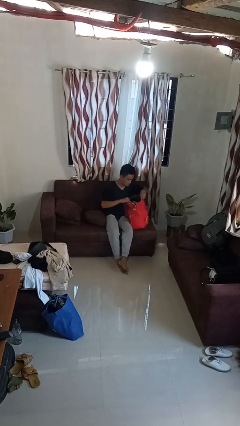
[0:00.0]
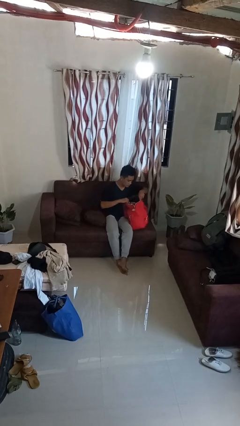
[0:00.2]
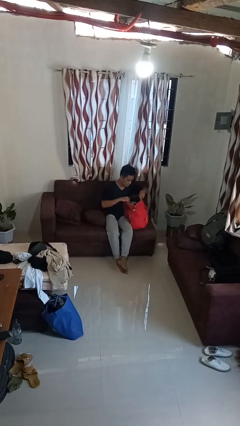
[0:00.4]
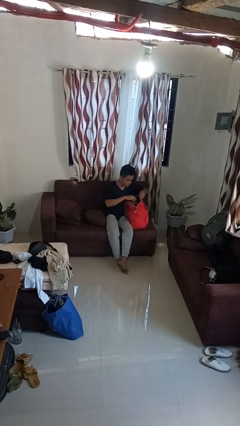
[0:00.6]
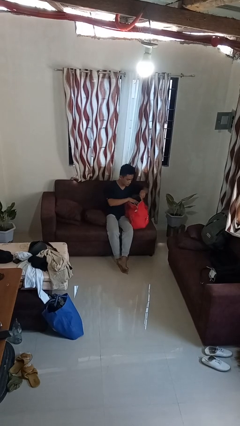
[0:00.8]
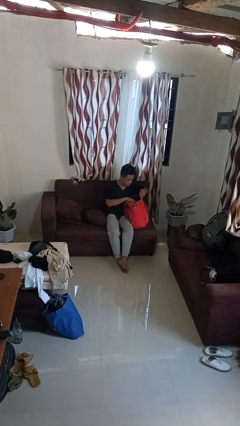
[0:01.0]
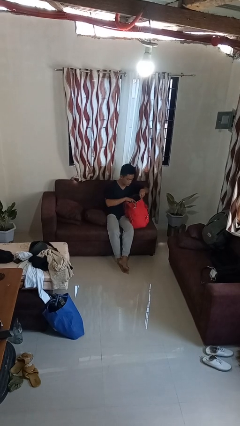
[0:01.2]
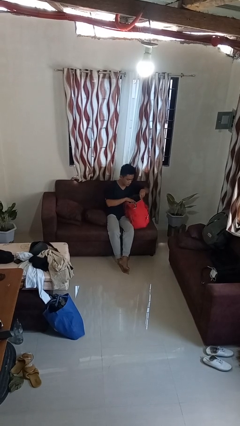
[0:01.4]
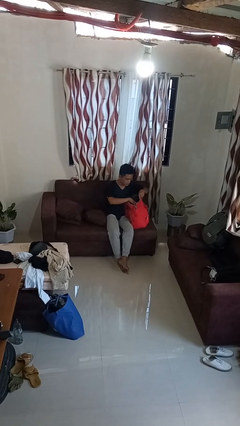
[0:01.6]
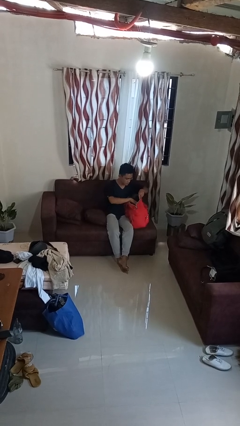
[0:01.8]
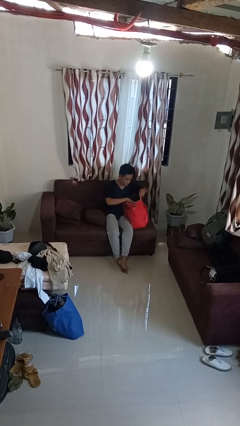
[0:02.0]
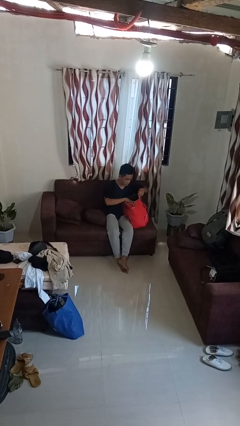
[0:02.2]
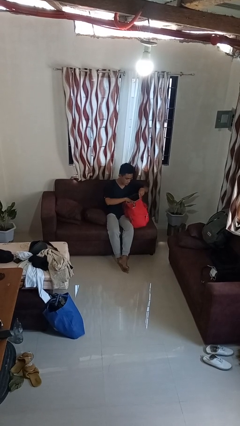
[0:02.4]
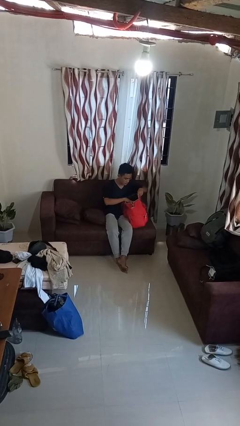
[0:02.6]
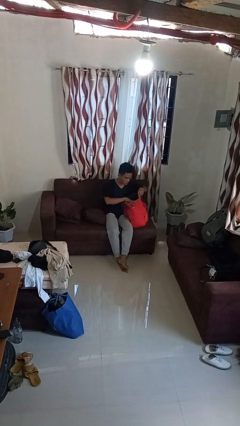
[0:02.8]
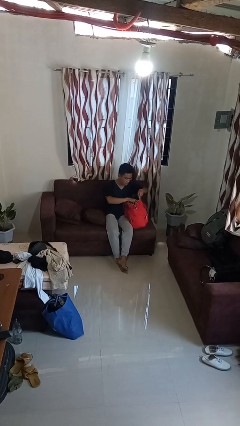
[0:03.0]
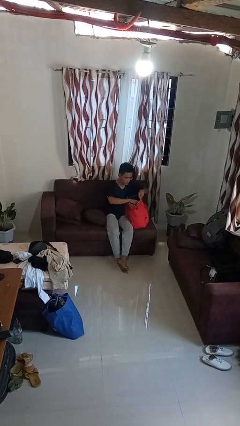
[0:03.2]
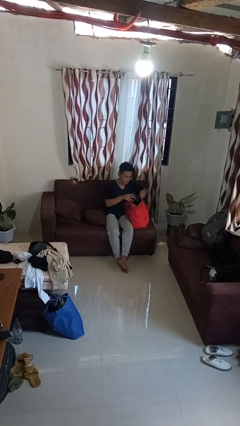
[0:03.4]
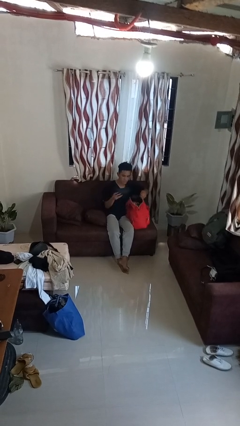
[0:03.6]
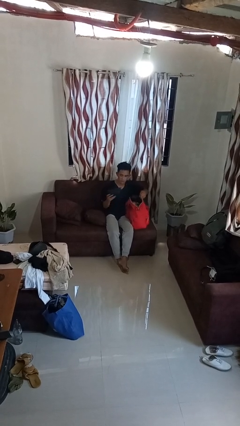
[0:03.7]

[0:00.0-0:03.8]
person searches in backpack

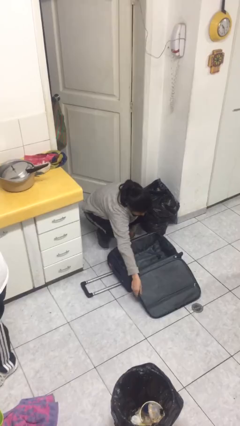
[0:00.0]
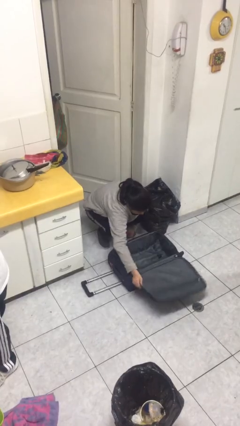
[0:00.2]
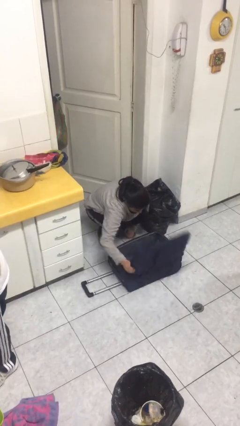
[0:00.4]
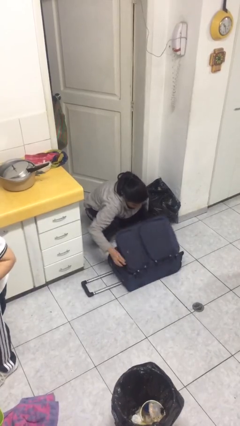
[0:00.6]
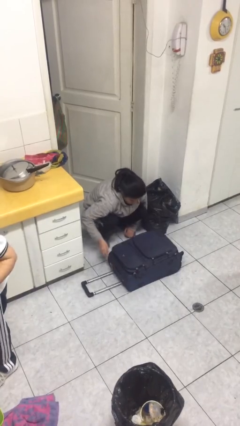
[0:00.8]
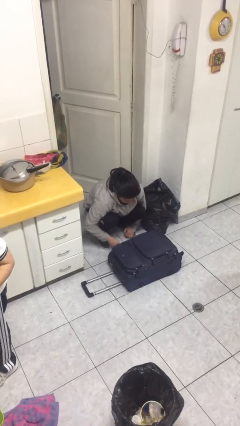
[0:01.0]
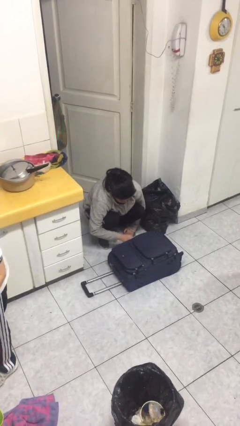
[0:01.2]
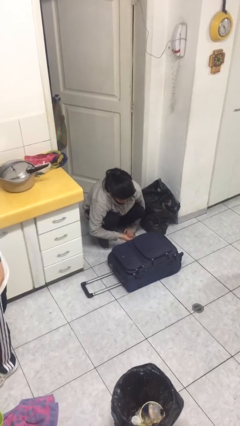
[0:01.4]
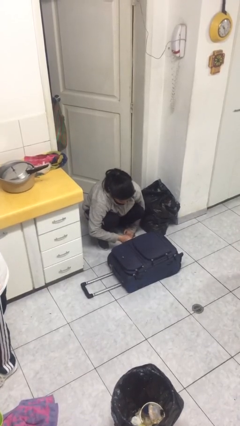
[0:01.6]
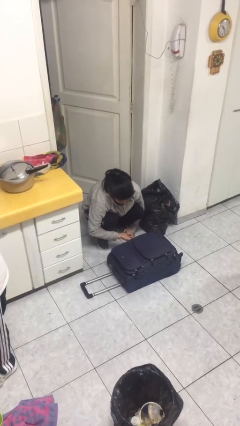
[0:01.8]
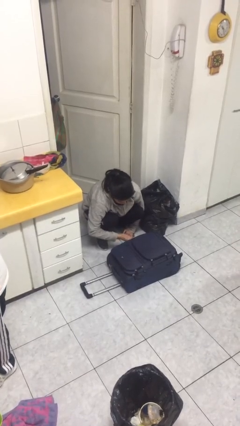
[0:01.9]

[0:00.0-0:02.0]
person closes suitcase

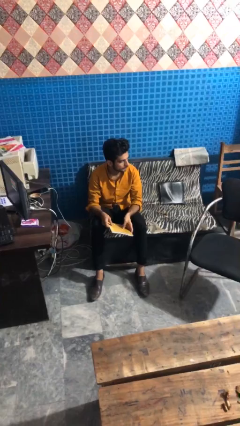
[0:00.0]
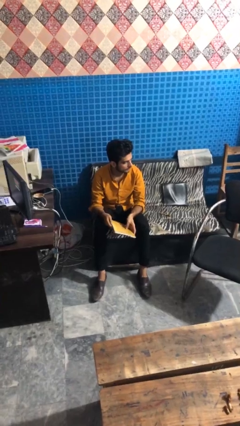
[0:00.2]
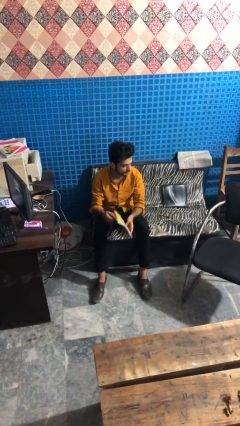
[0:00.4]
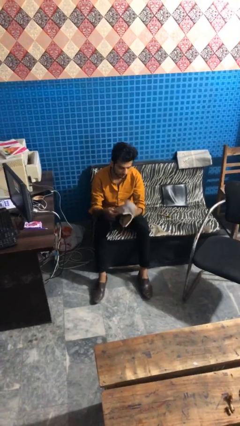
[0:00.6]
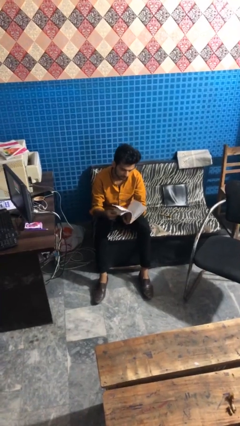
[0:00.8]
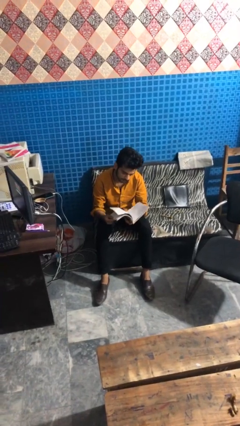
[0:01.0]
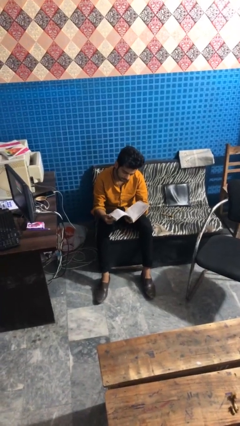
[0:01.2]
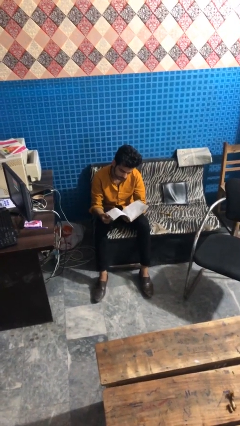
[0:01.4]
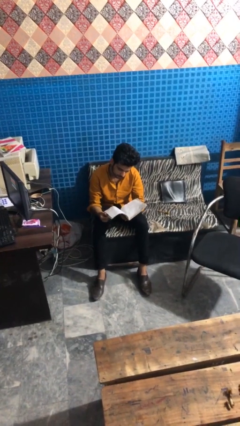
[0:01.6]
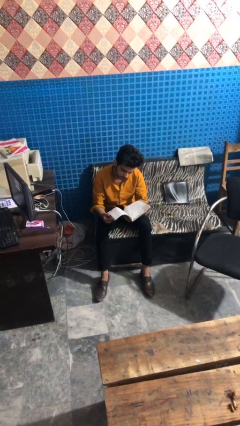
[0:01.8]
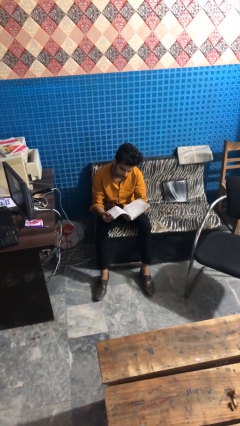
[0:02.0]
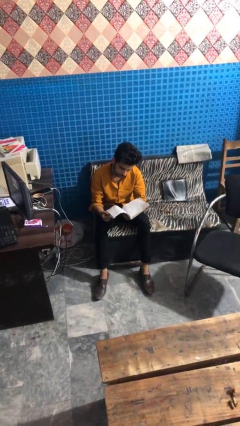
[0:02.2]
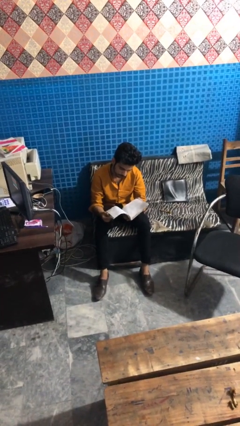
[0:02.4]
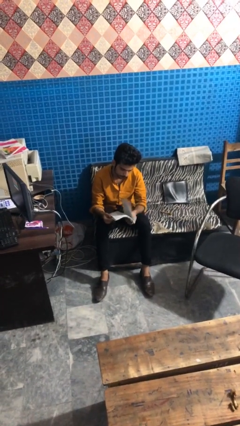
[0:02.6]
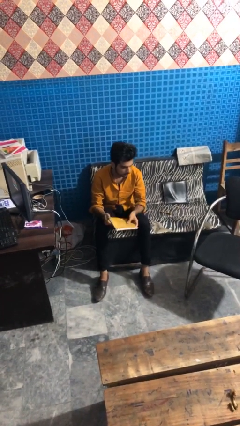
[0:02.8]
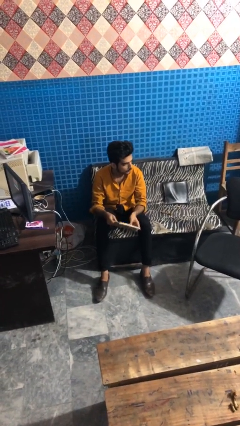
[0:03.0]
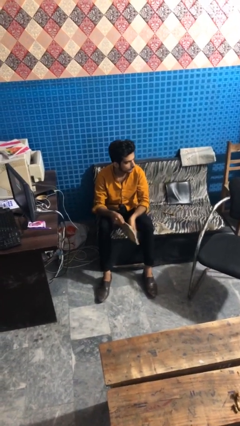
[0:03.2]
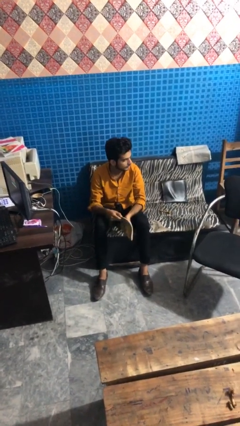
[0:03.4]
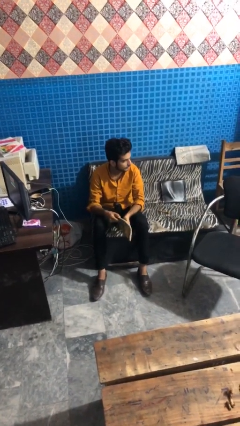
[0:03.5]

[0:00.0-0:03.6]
person reads magazine

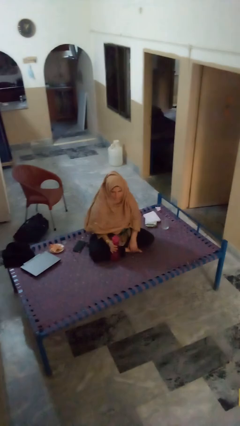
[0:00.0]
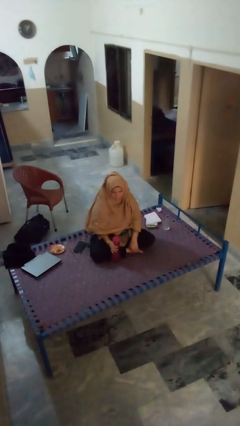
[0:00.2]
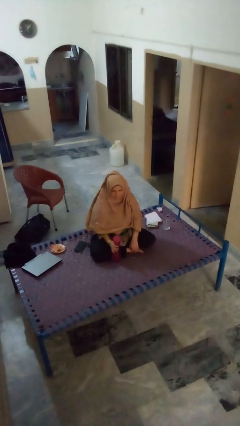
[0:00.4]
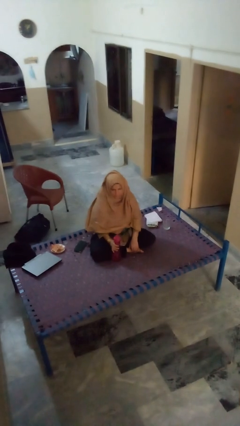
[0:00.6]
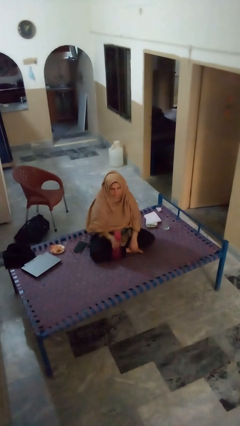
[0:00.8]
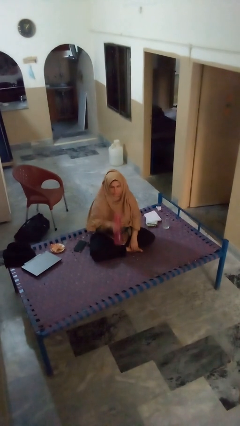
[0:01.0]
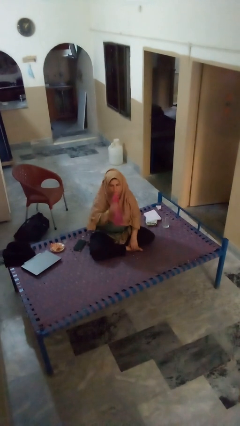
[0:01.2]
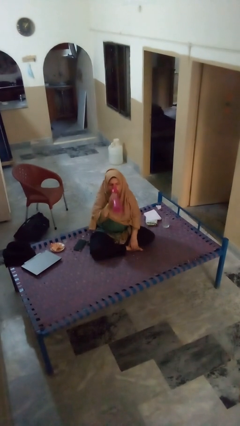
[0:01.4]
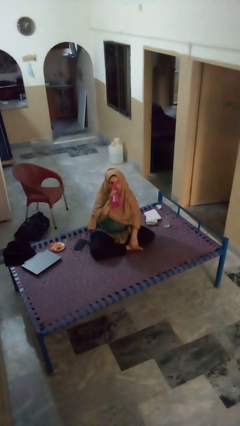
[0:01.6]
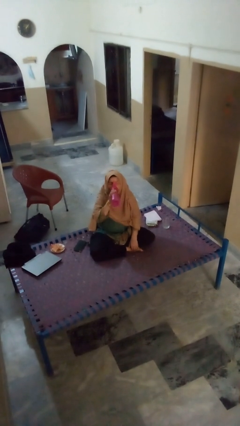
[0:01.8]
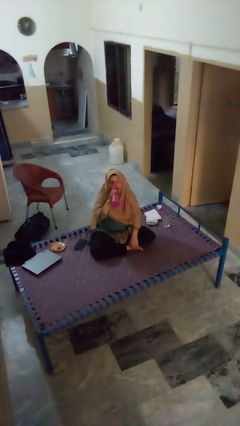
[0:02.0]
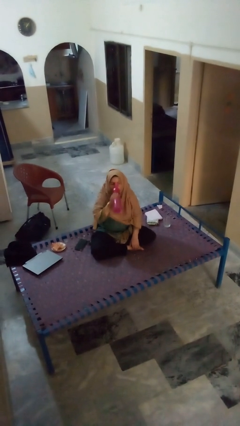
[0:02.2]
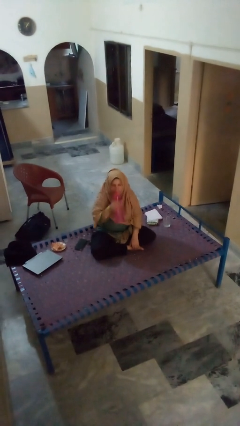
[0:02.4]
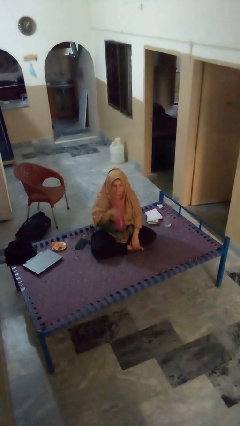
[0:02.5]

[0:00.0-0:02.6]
person drinks from bottle

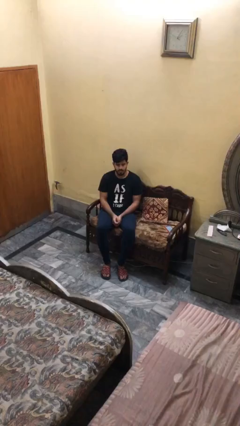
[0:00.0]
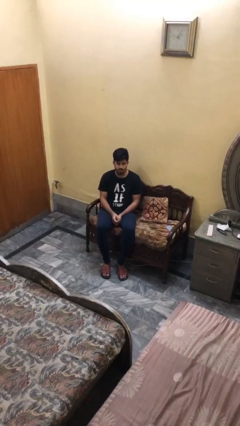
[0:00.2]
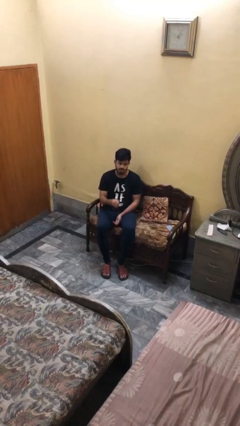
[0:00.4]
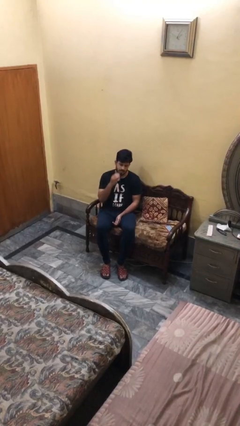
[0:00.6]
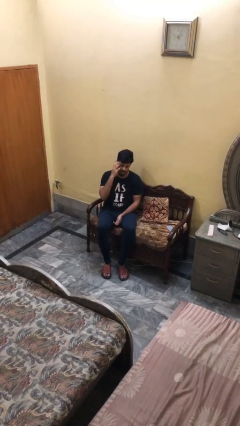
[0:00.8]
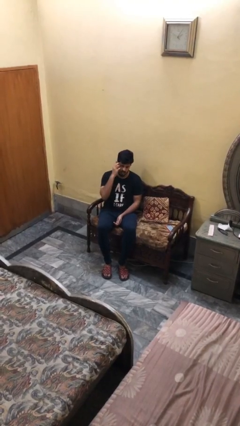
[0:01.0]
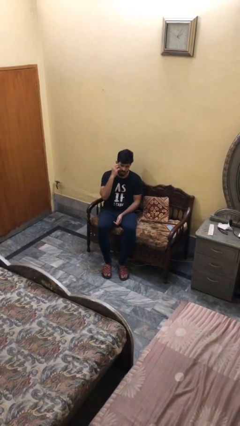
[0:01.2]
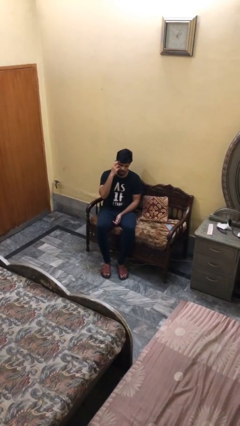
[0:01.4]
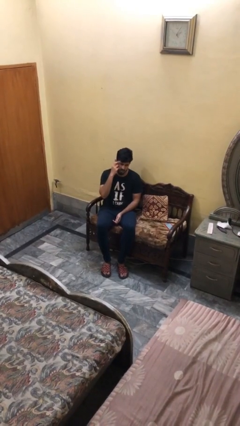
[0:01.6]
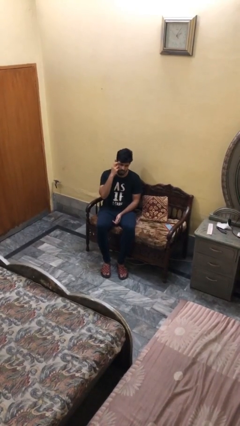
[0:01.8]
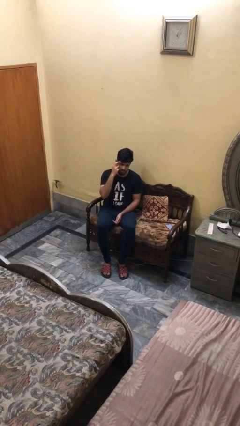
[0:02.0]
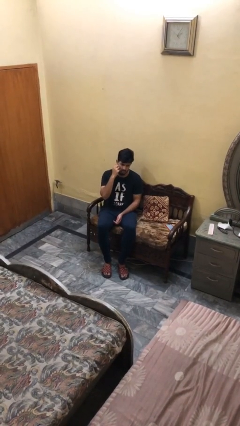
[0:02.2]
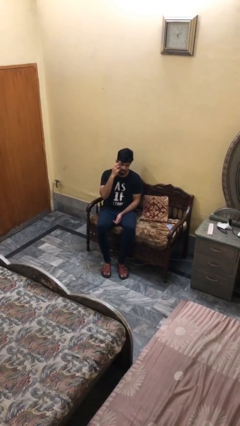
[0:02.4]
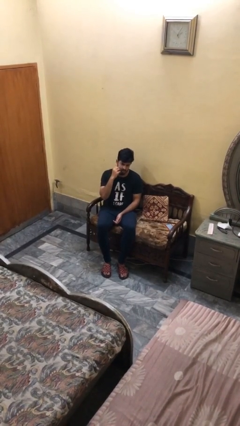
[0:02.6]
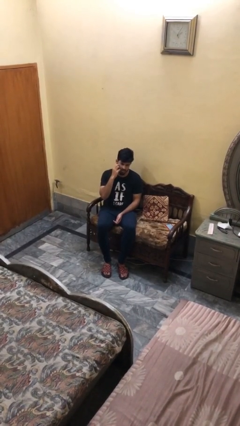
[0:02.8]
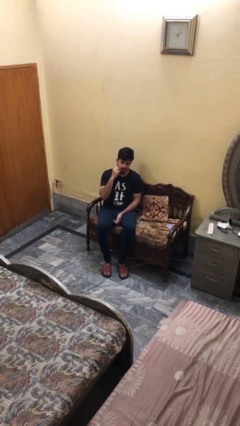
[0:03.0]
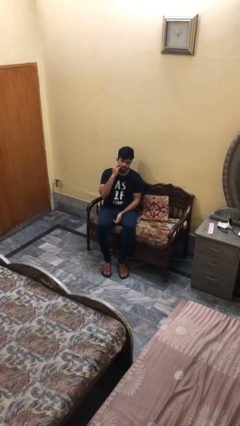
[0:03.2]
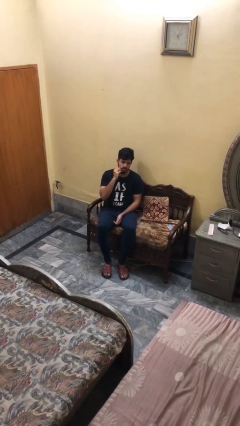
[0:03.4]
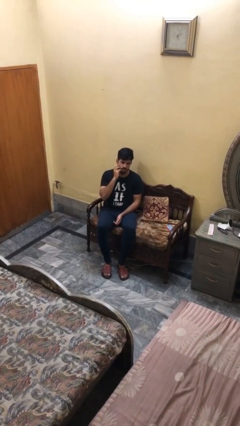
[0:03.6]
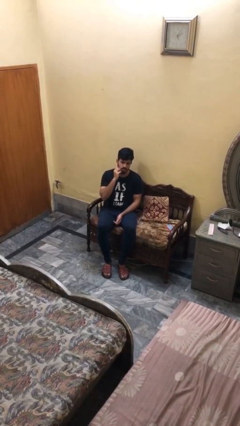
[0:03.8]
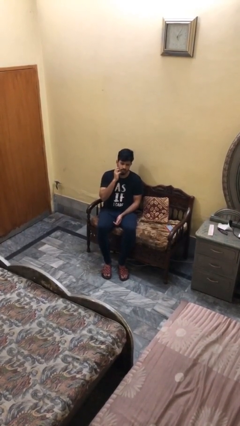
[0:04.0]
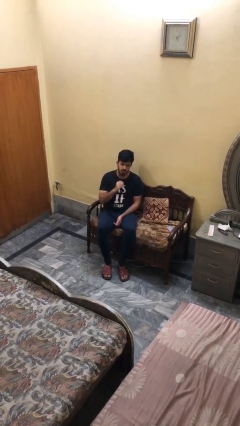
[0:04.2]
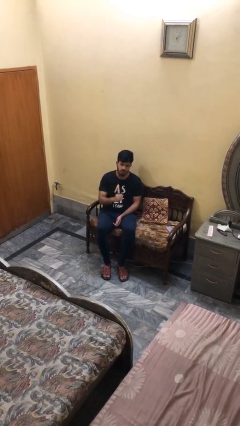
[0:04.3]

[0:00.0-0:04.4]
person scratches face

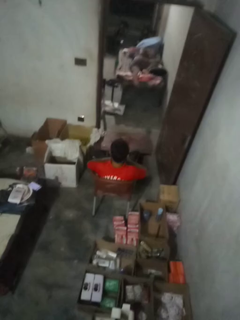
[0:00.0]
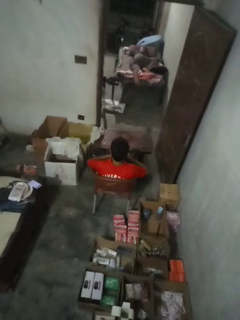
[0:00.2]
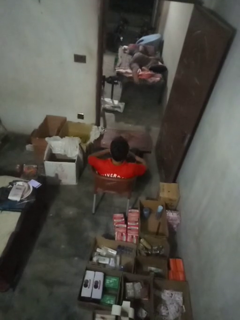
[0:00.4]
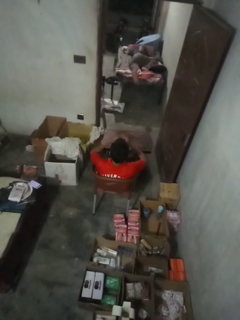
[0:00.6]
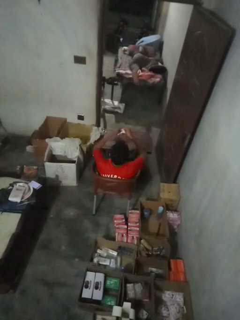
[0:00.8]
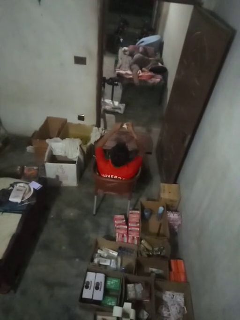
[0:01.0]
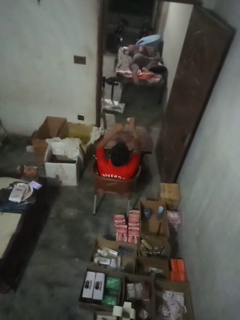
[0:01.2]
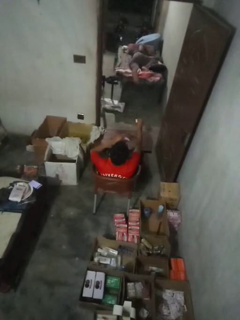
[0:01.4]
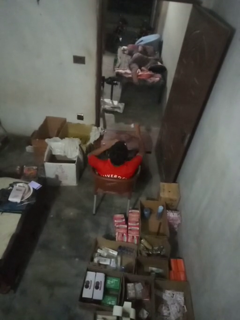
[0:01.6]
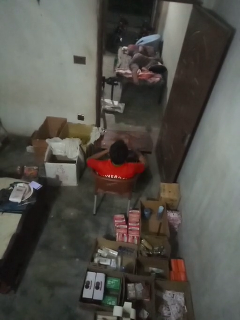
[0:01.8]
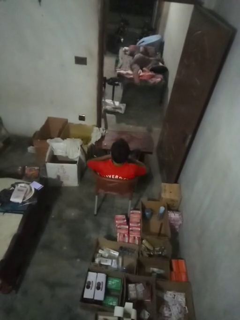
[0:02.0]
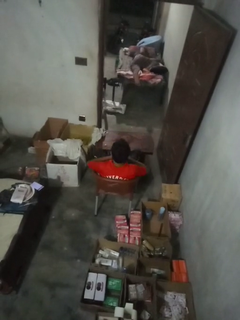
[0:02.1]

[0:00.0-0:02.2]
person tears paper
